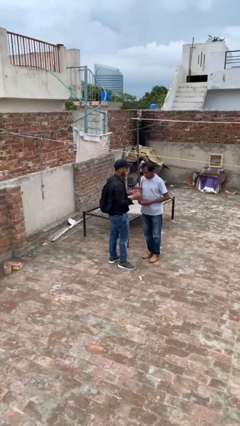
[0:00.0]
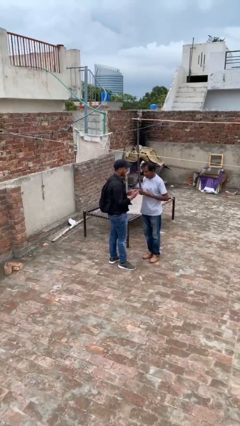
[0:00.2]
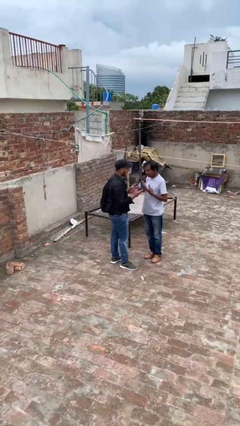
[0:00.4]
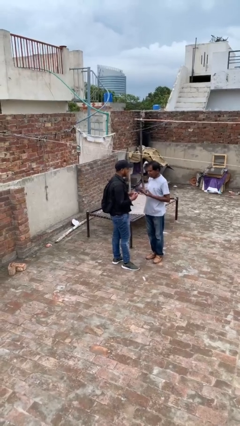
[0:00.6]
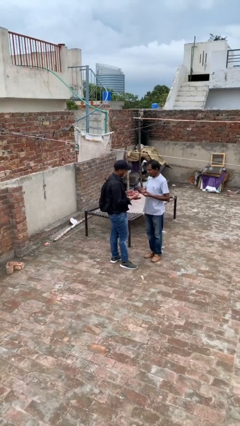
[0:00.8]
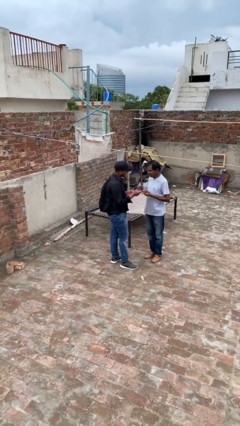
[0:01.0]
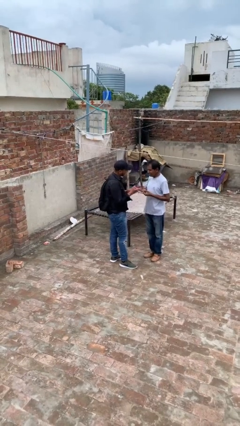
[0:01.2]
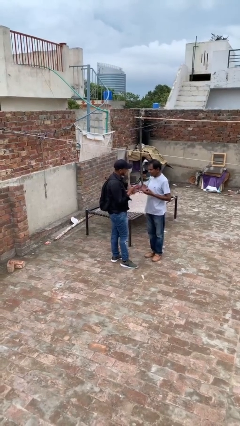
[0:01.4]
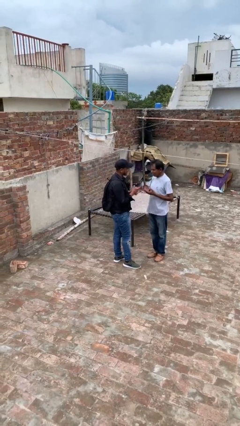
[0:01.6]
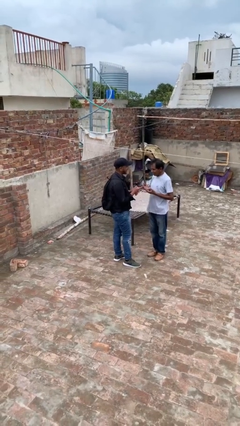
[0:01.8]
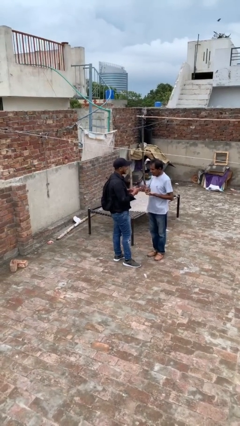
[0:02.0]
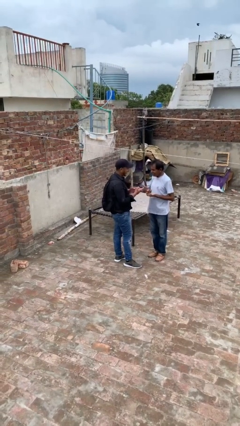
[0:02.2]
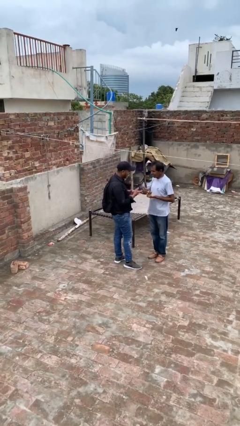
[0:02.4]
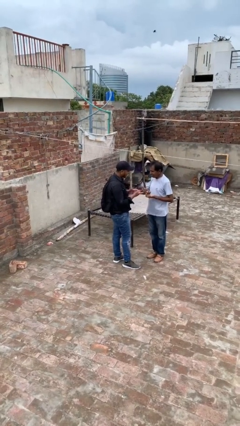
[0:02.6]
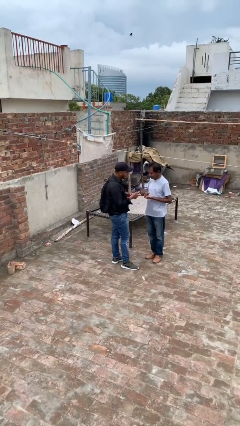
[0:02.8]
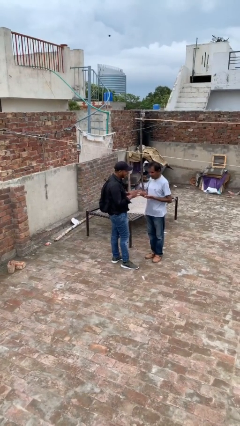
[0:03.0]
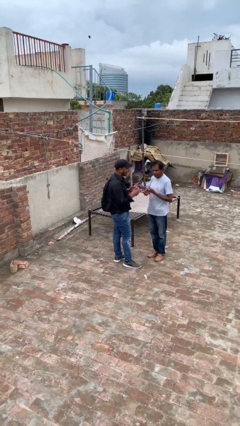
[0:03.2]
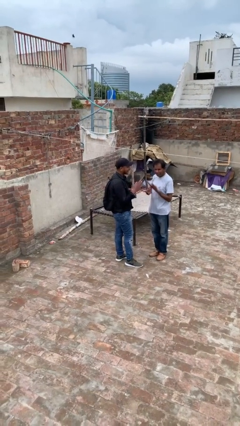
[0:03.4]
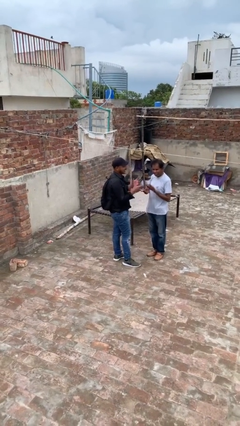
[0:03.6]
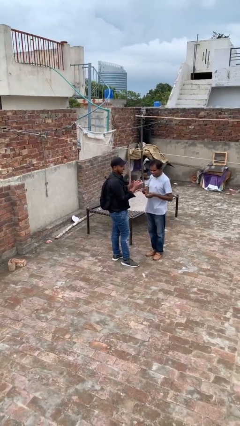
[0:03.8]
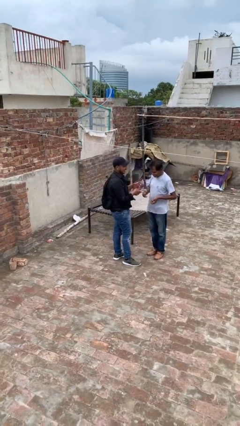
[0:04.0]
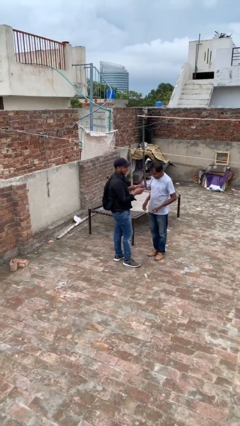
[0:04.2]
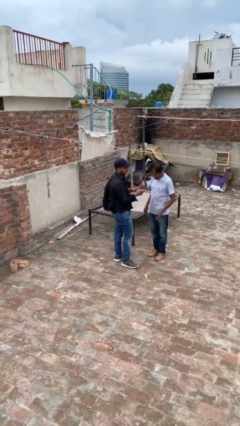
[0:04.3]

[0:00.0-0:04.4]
person talks to person

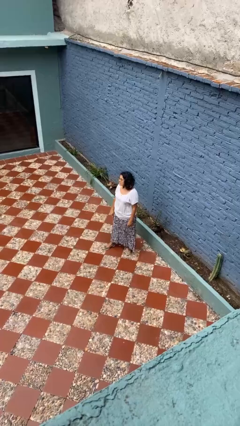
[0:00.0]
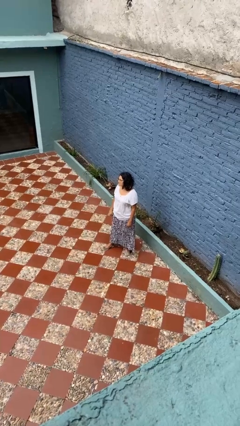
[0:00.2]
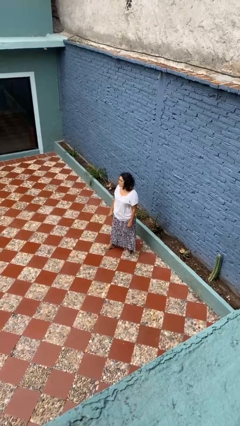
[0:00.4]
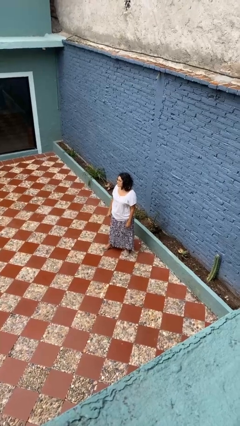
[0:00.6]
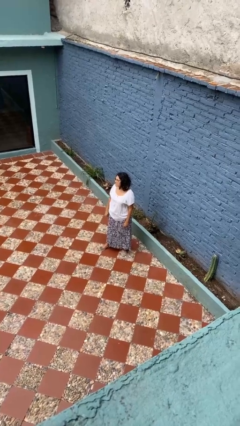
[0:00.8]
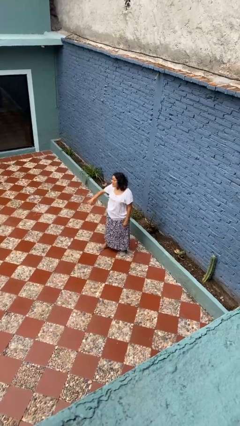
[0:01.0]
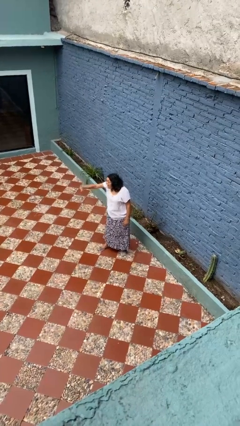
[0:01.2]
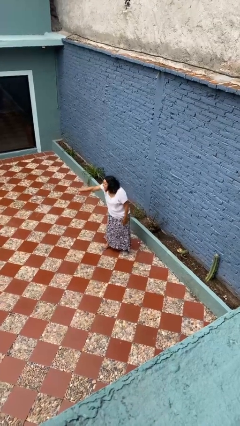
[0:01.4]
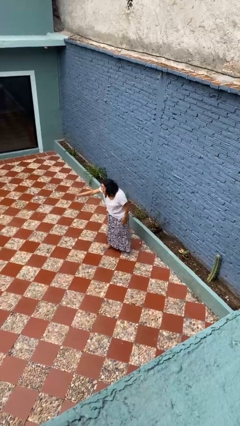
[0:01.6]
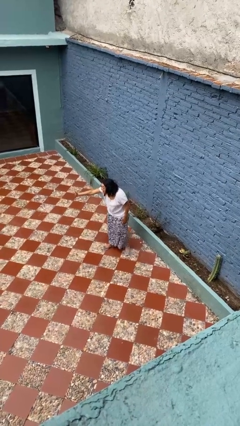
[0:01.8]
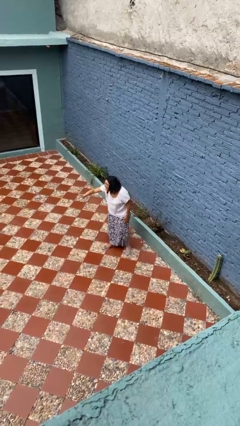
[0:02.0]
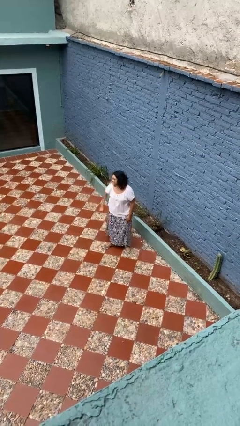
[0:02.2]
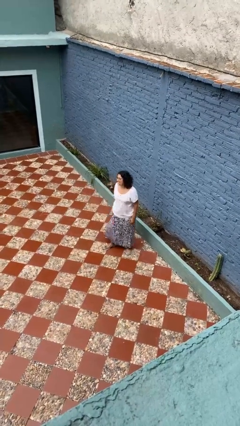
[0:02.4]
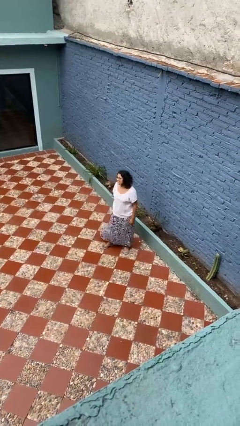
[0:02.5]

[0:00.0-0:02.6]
person waves at person

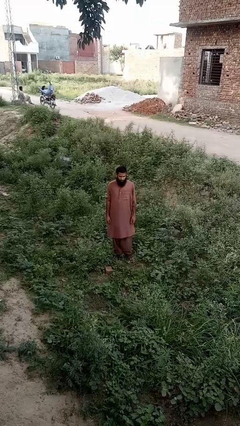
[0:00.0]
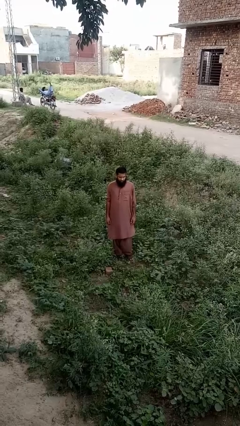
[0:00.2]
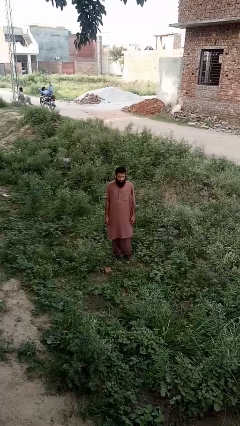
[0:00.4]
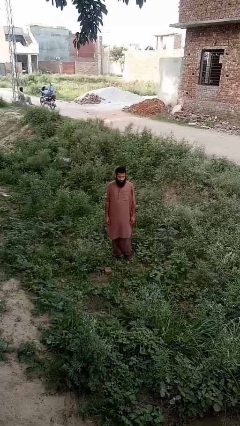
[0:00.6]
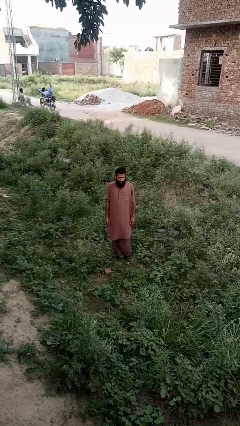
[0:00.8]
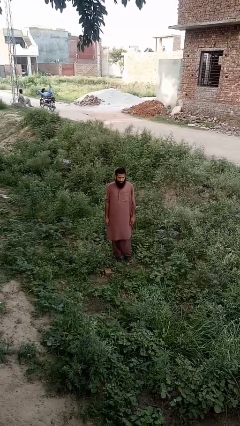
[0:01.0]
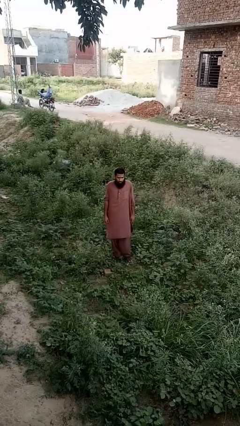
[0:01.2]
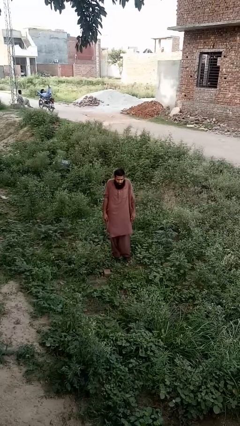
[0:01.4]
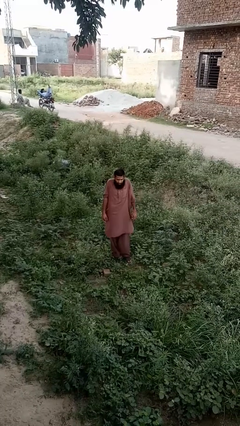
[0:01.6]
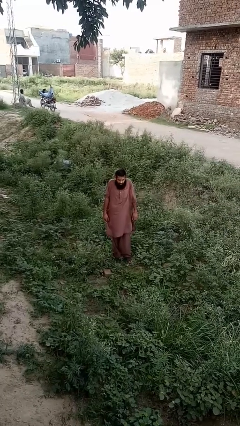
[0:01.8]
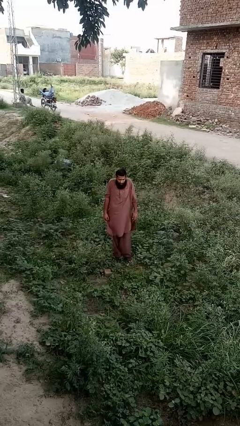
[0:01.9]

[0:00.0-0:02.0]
person shrugs

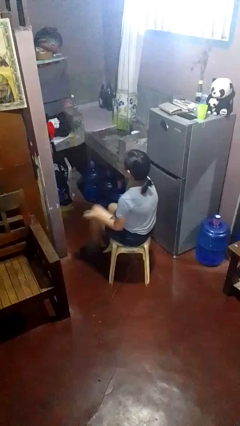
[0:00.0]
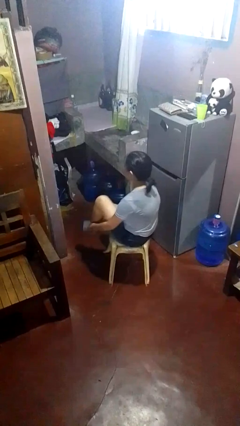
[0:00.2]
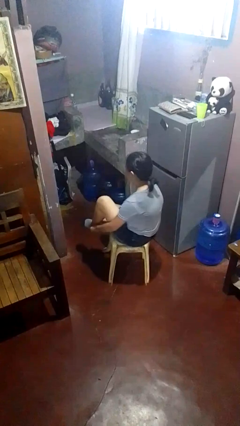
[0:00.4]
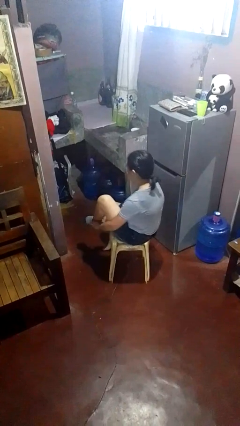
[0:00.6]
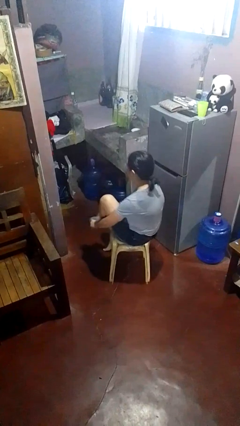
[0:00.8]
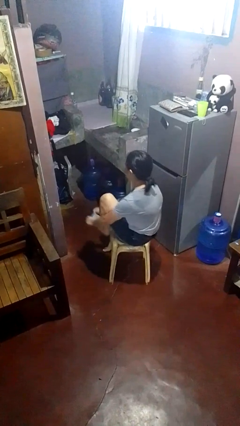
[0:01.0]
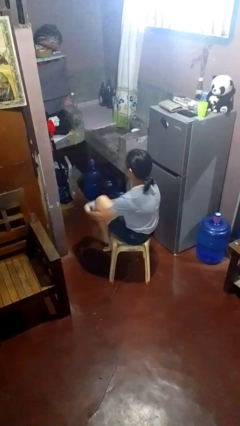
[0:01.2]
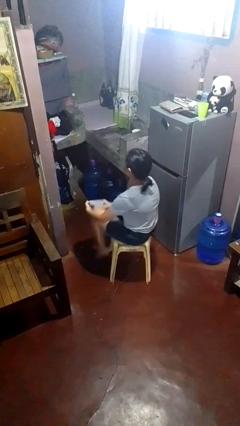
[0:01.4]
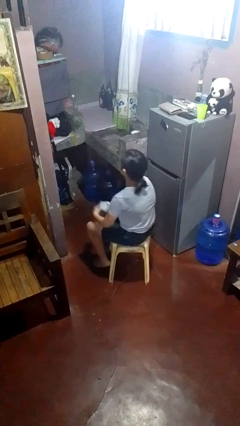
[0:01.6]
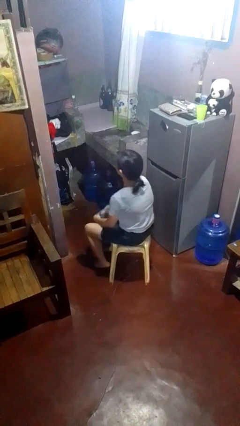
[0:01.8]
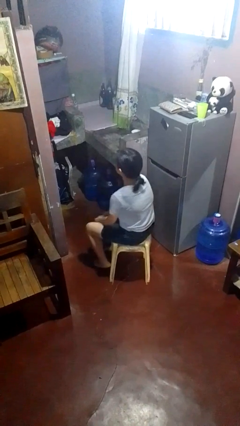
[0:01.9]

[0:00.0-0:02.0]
person takes off socks

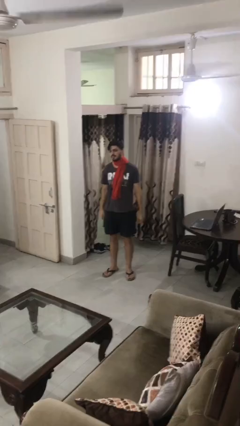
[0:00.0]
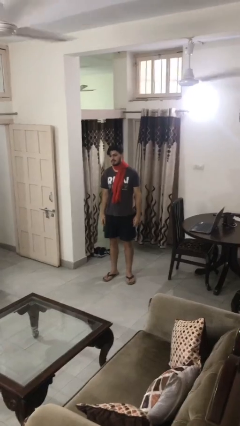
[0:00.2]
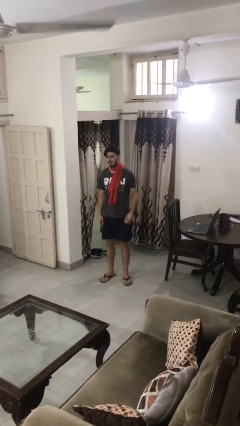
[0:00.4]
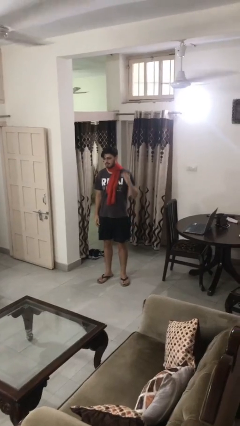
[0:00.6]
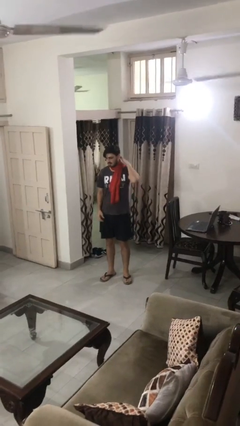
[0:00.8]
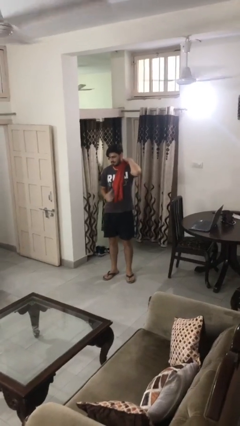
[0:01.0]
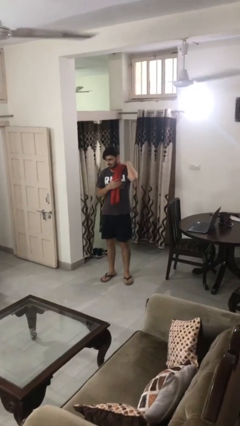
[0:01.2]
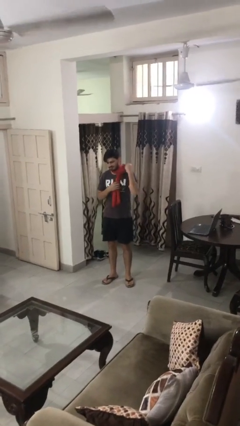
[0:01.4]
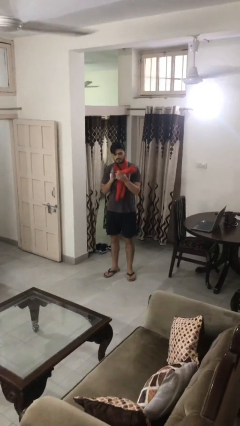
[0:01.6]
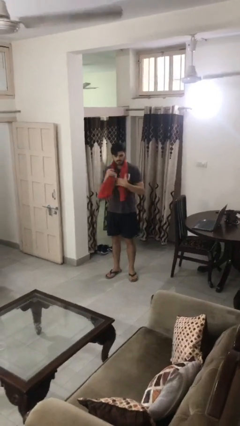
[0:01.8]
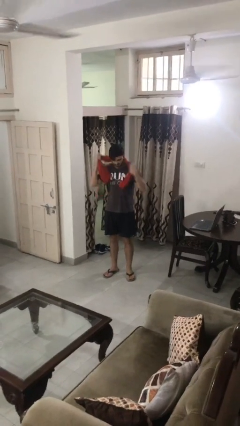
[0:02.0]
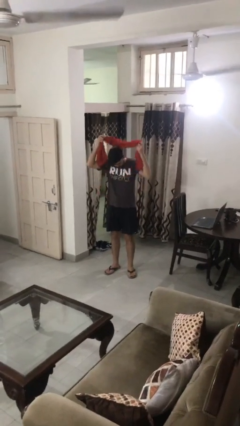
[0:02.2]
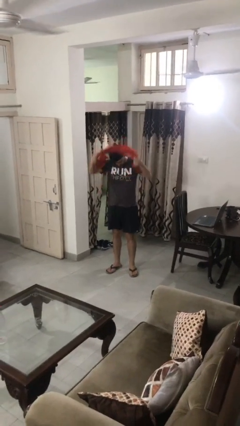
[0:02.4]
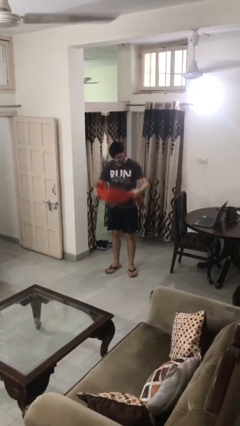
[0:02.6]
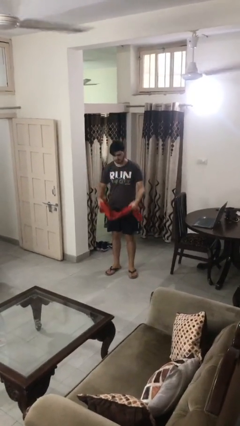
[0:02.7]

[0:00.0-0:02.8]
person takes off scarf

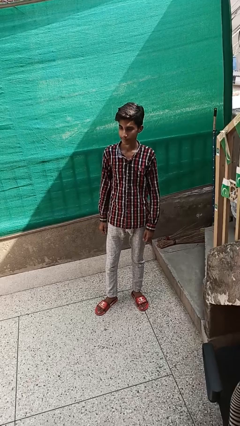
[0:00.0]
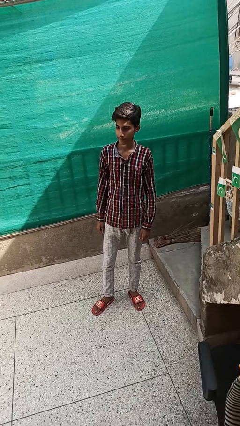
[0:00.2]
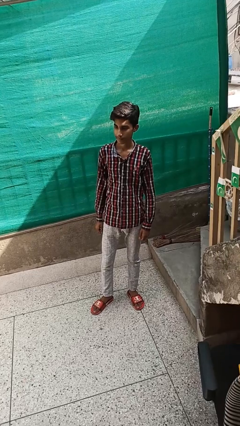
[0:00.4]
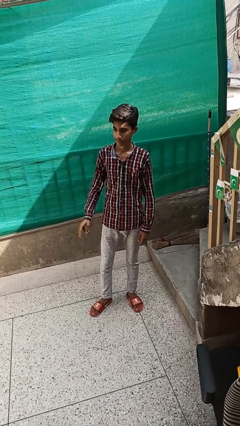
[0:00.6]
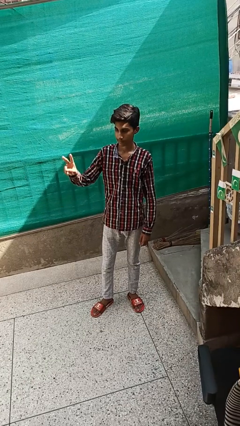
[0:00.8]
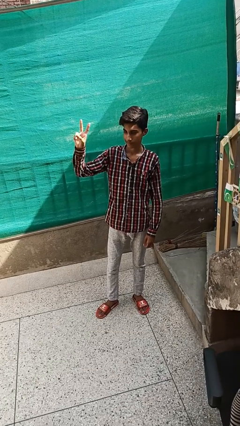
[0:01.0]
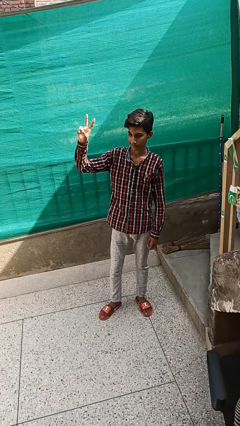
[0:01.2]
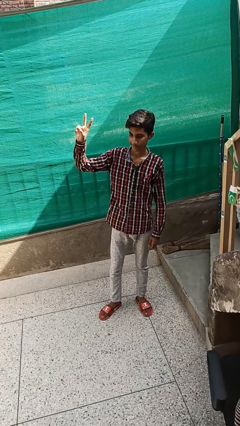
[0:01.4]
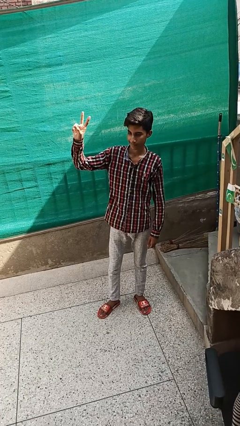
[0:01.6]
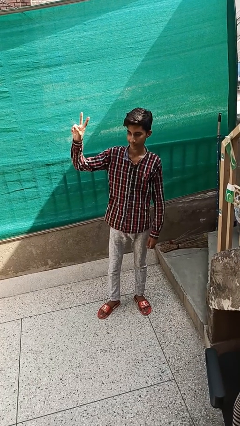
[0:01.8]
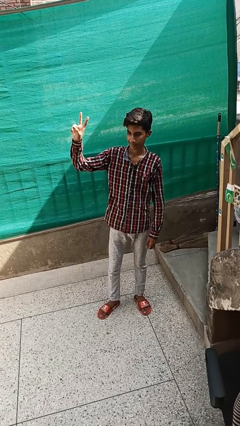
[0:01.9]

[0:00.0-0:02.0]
person gestures peace

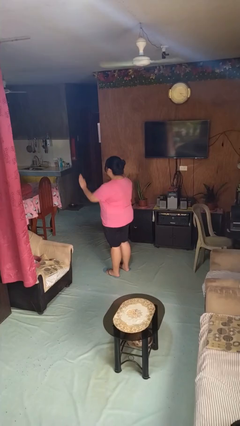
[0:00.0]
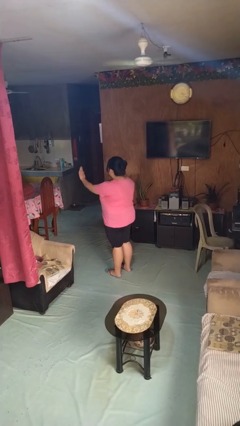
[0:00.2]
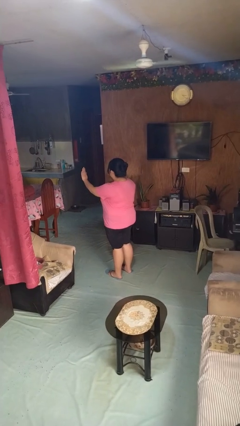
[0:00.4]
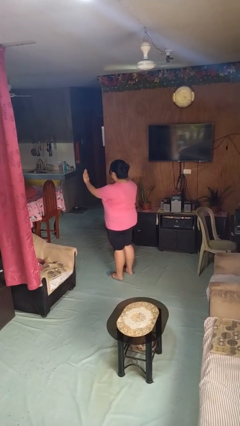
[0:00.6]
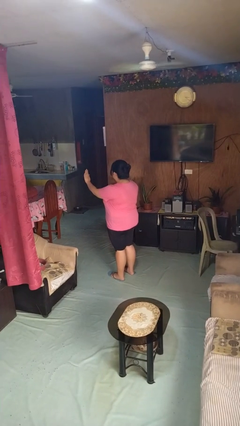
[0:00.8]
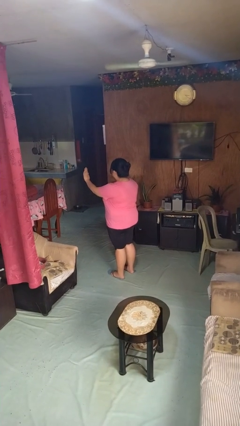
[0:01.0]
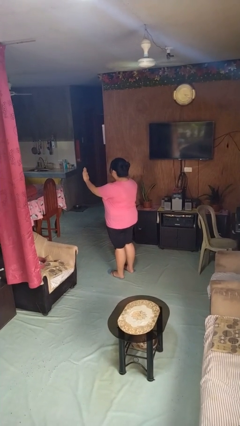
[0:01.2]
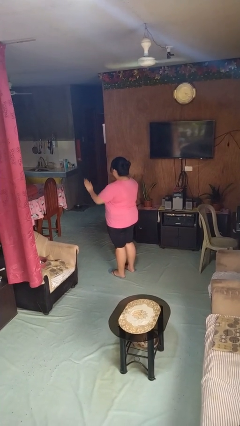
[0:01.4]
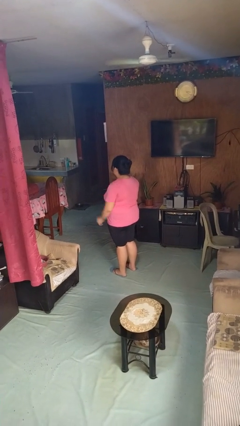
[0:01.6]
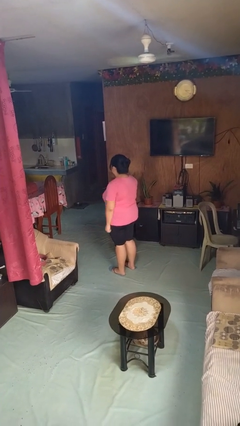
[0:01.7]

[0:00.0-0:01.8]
person gestures stop
